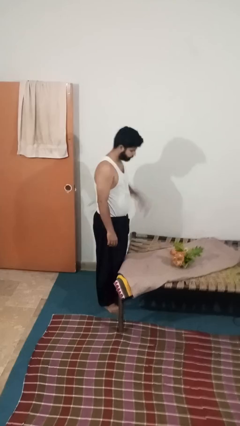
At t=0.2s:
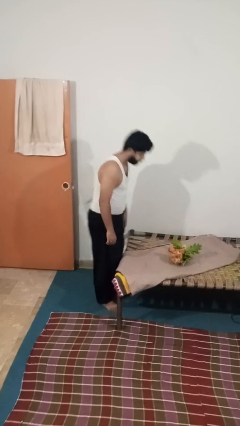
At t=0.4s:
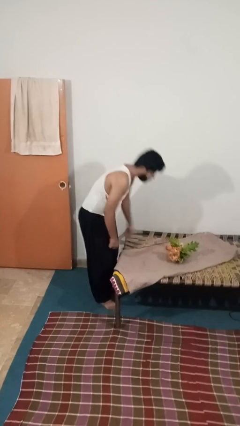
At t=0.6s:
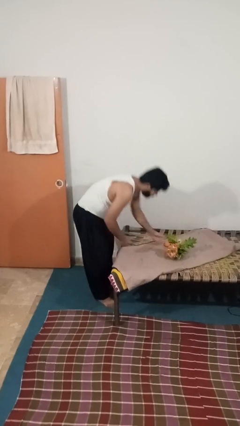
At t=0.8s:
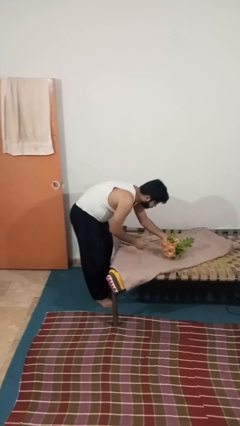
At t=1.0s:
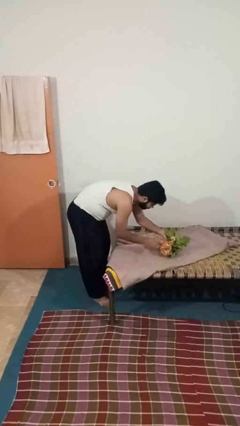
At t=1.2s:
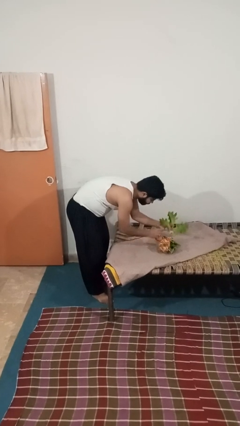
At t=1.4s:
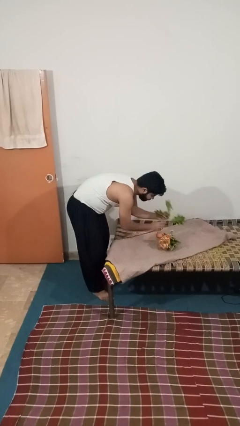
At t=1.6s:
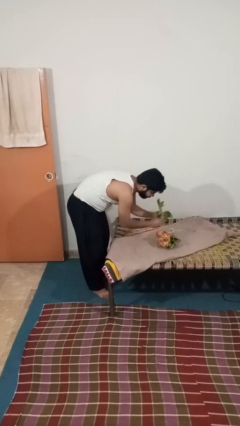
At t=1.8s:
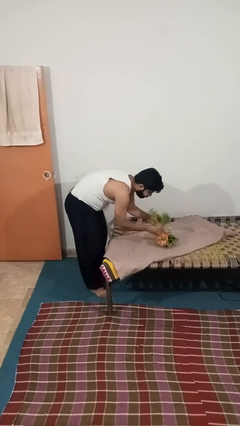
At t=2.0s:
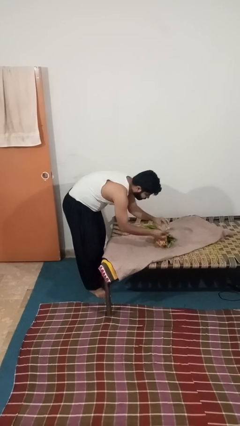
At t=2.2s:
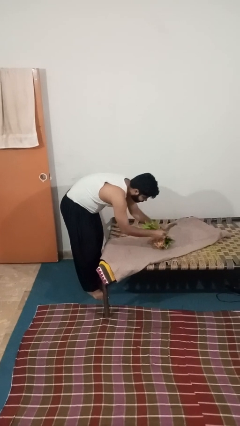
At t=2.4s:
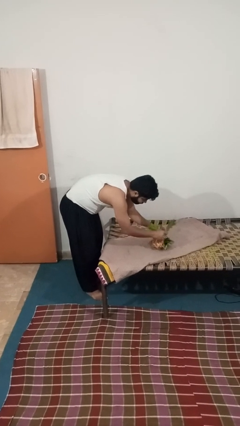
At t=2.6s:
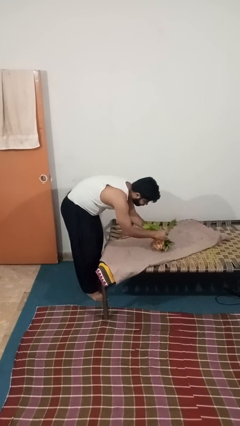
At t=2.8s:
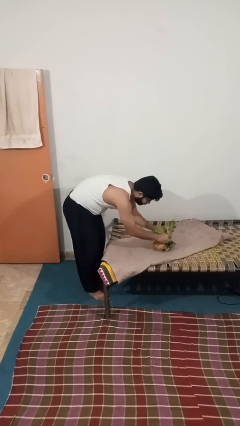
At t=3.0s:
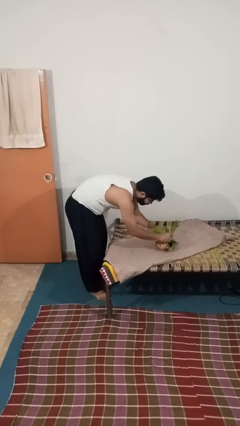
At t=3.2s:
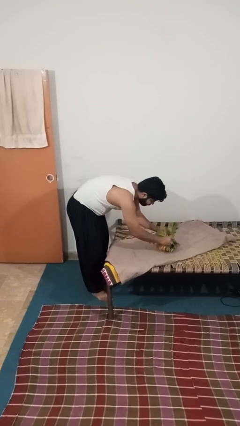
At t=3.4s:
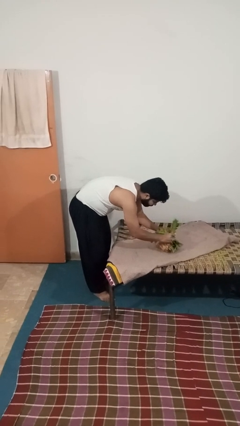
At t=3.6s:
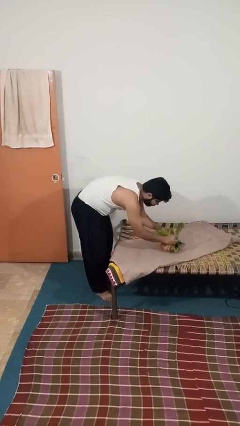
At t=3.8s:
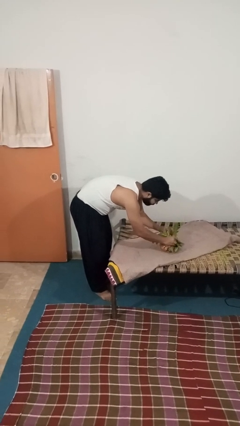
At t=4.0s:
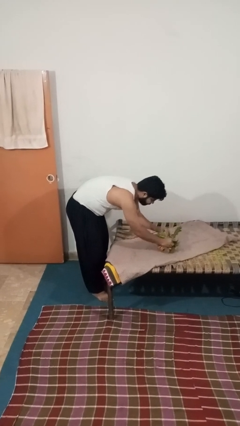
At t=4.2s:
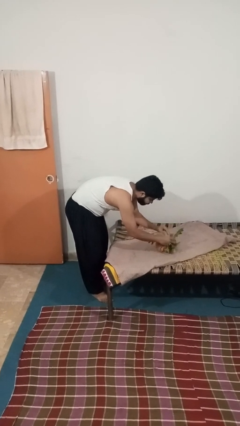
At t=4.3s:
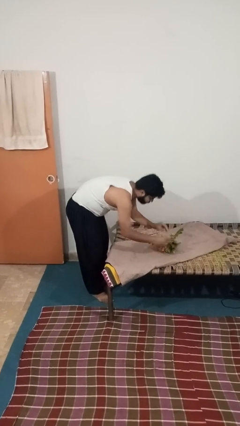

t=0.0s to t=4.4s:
person arranges flowers in vase

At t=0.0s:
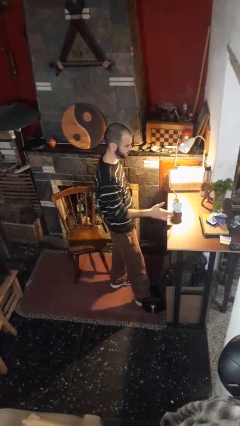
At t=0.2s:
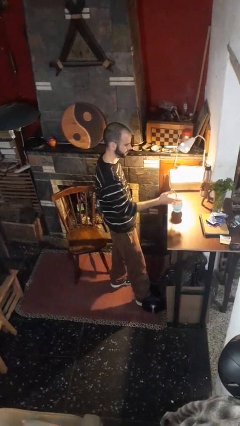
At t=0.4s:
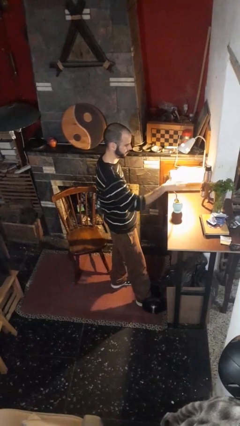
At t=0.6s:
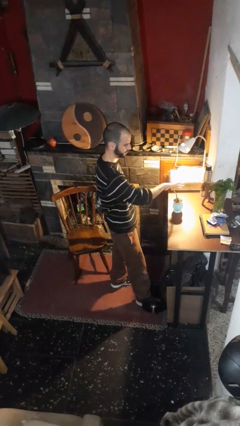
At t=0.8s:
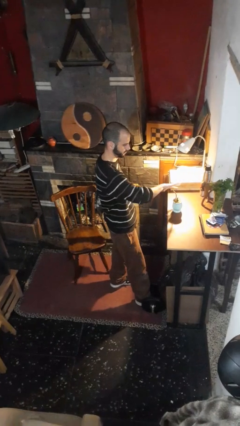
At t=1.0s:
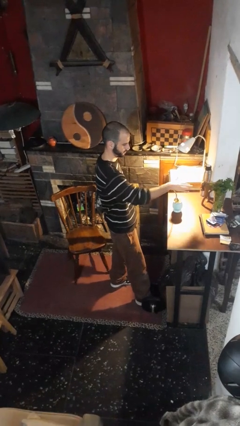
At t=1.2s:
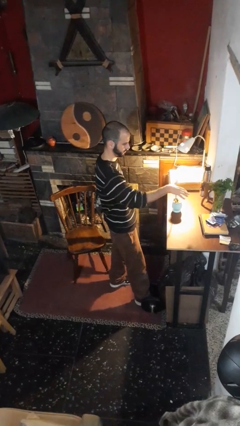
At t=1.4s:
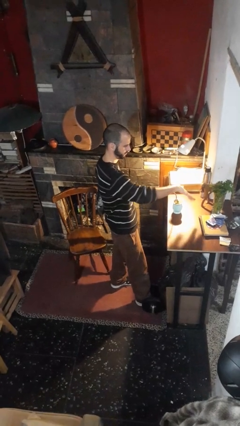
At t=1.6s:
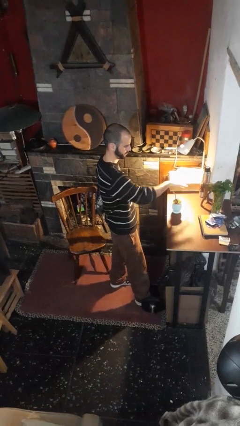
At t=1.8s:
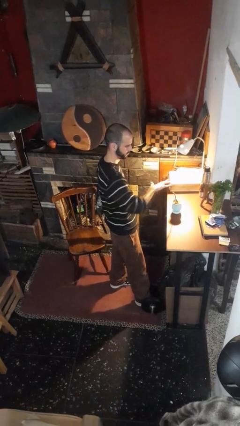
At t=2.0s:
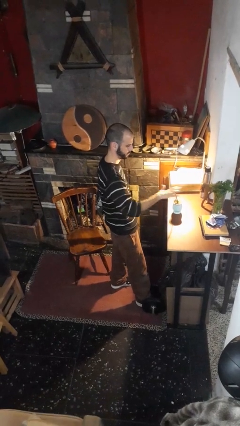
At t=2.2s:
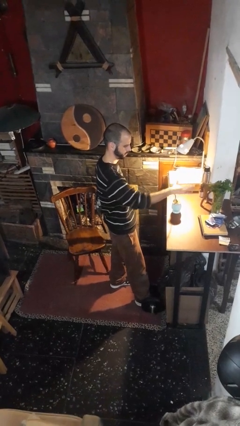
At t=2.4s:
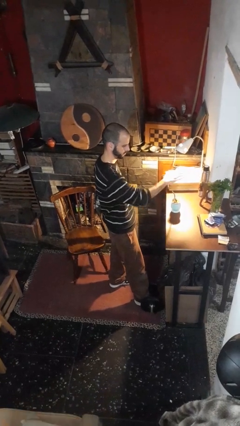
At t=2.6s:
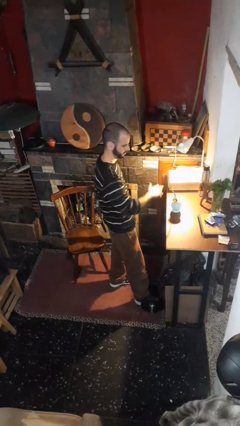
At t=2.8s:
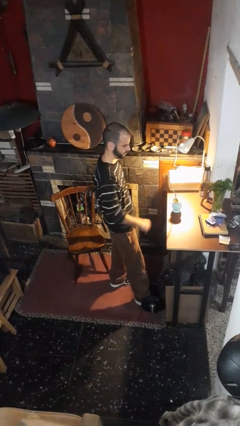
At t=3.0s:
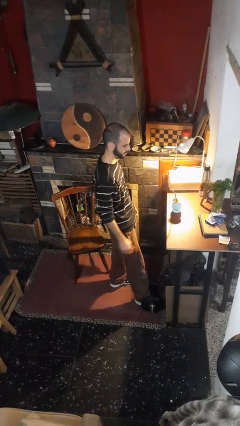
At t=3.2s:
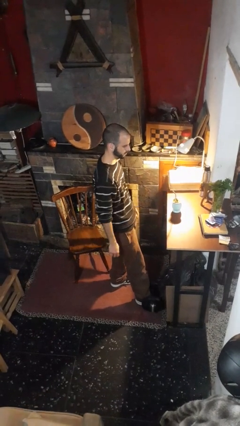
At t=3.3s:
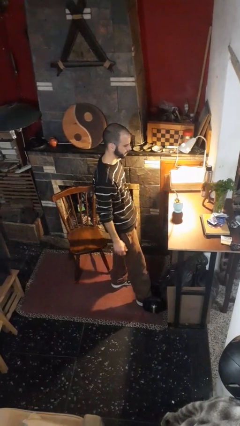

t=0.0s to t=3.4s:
person waves hand over object

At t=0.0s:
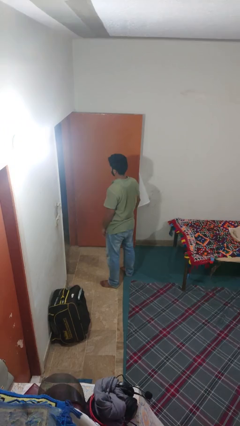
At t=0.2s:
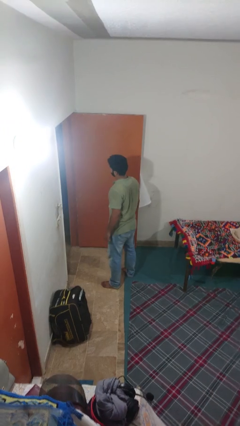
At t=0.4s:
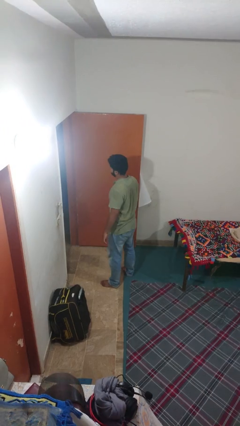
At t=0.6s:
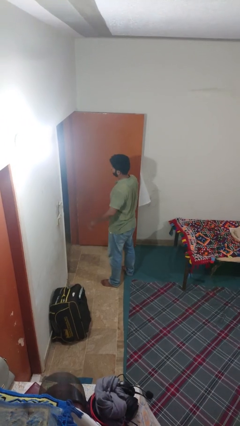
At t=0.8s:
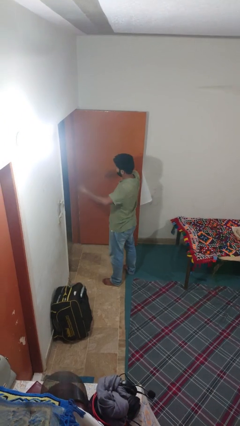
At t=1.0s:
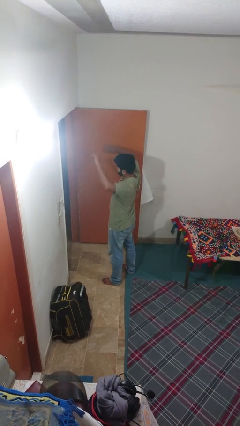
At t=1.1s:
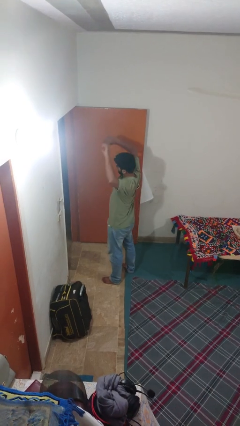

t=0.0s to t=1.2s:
person stretches arms over head

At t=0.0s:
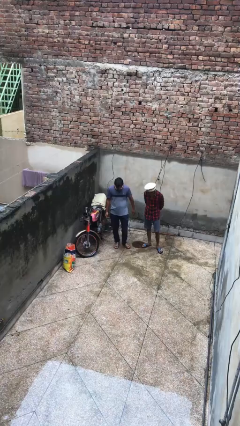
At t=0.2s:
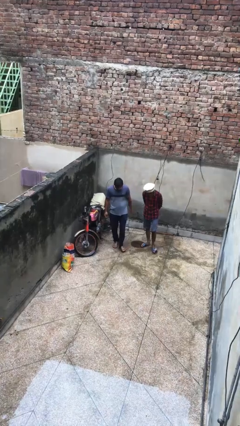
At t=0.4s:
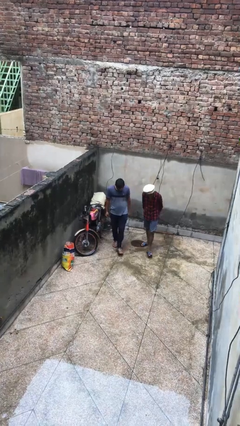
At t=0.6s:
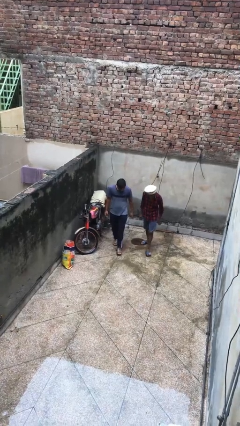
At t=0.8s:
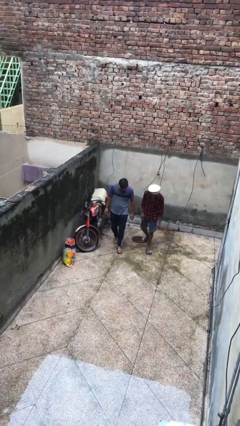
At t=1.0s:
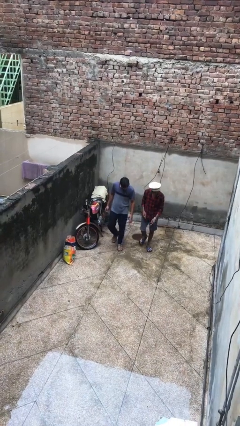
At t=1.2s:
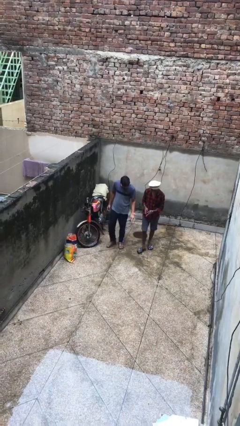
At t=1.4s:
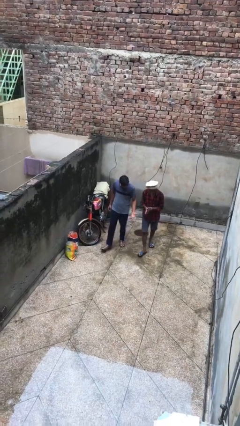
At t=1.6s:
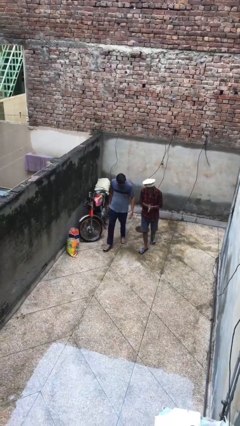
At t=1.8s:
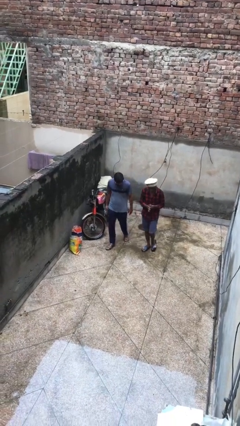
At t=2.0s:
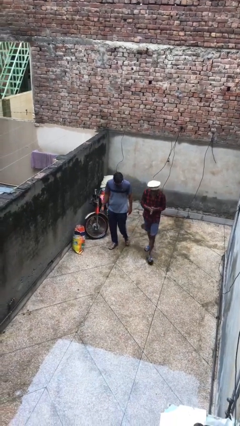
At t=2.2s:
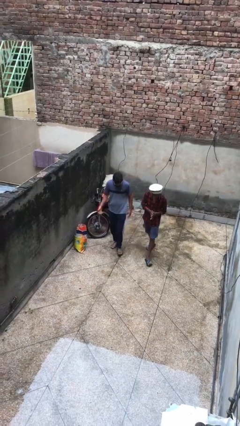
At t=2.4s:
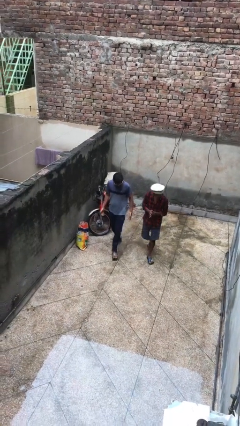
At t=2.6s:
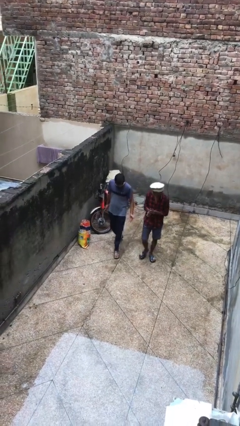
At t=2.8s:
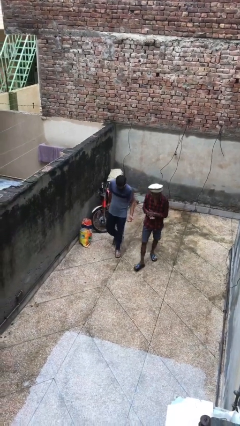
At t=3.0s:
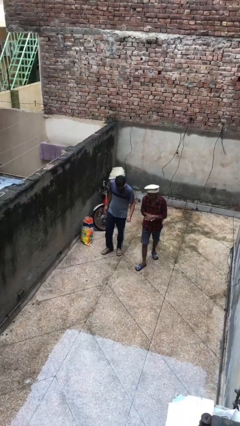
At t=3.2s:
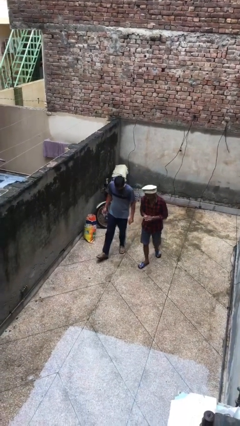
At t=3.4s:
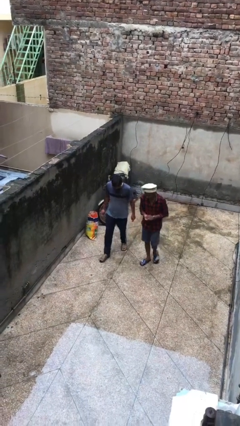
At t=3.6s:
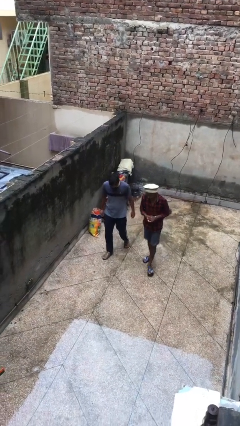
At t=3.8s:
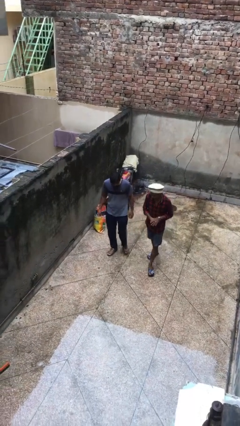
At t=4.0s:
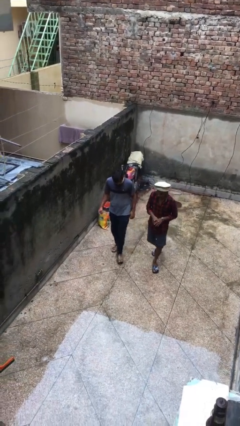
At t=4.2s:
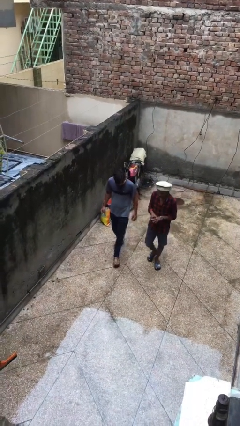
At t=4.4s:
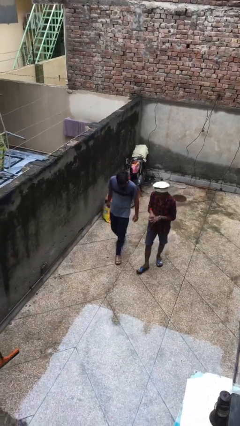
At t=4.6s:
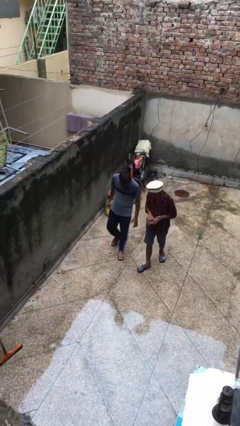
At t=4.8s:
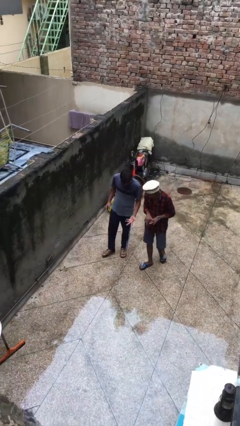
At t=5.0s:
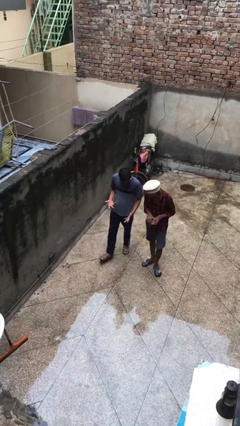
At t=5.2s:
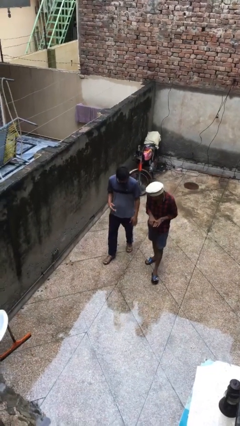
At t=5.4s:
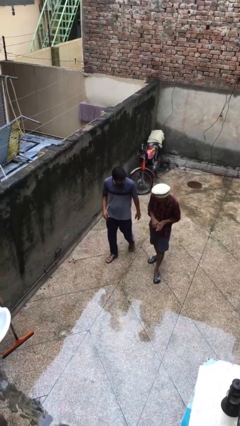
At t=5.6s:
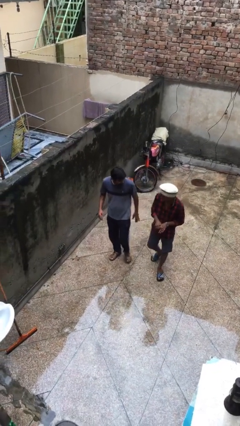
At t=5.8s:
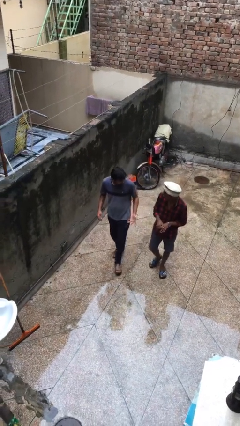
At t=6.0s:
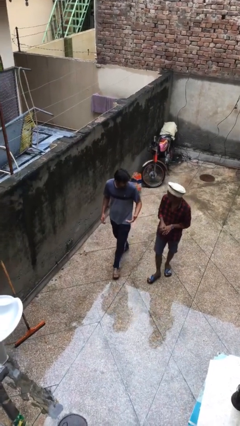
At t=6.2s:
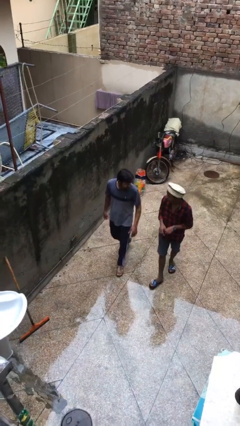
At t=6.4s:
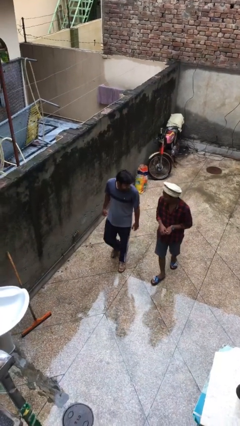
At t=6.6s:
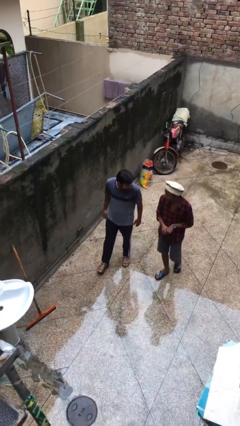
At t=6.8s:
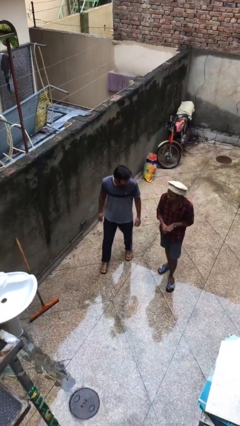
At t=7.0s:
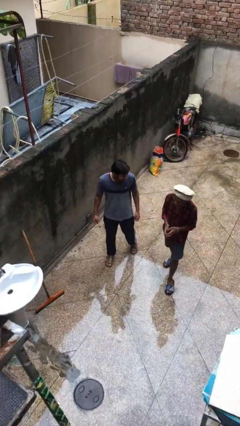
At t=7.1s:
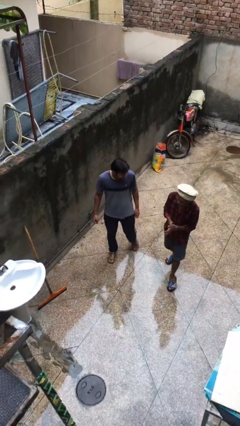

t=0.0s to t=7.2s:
person talks to person

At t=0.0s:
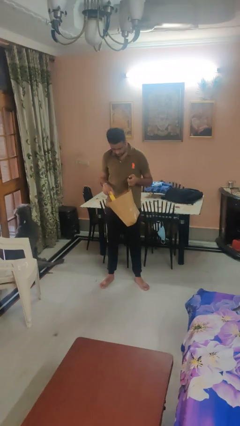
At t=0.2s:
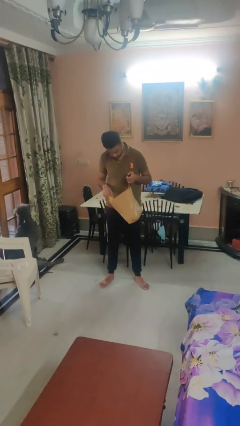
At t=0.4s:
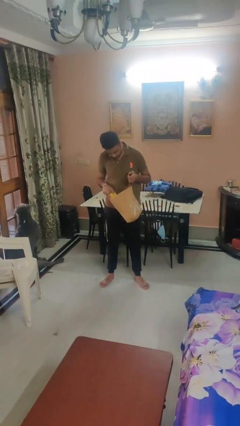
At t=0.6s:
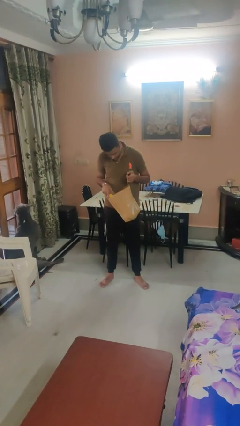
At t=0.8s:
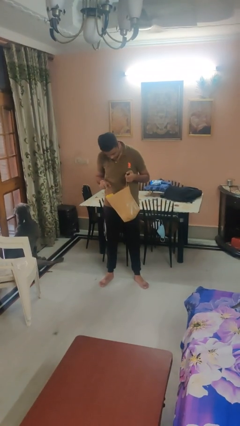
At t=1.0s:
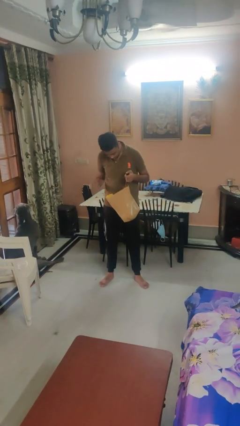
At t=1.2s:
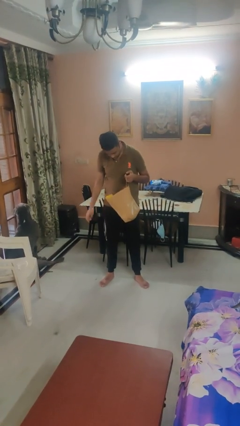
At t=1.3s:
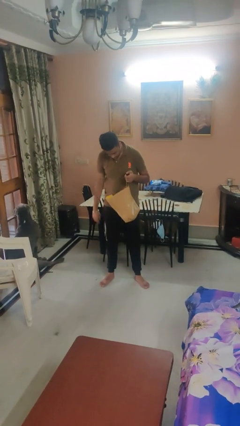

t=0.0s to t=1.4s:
person puts object into bag
